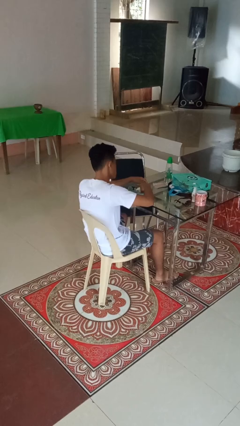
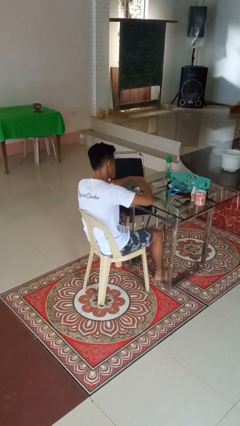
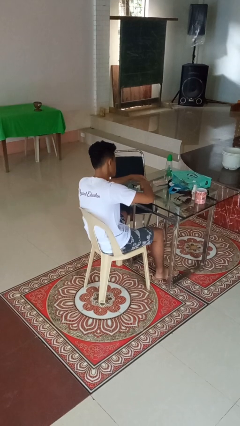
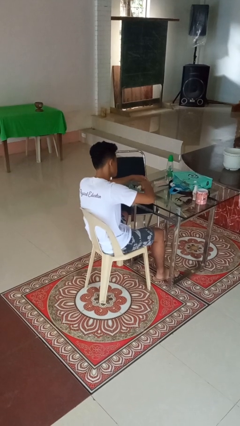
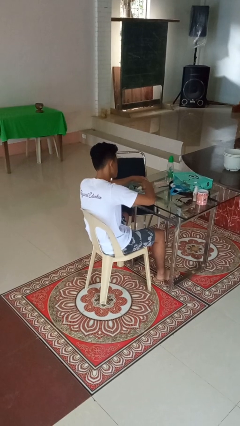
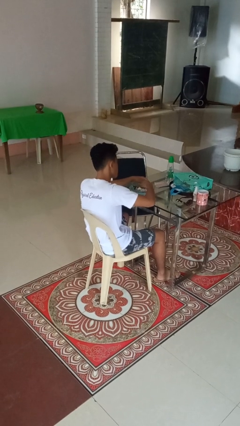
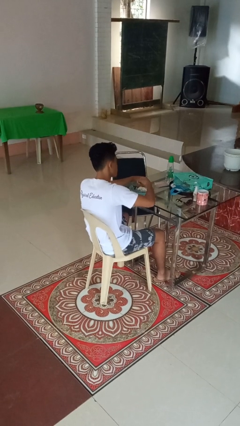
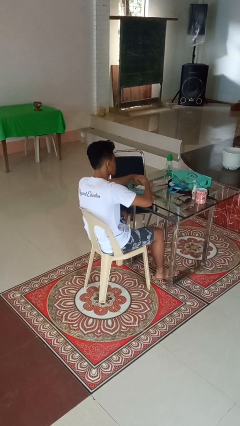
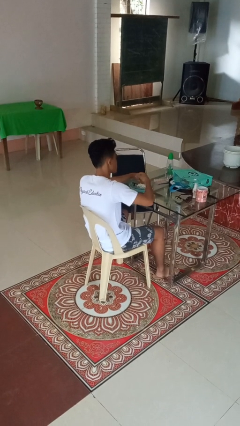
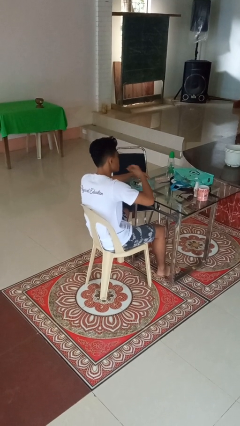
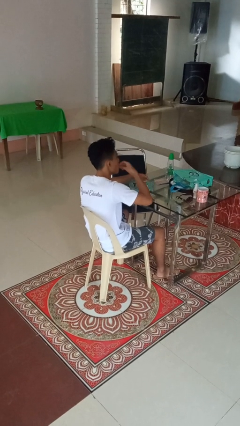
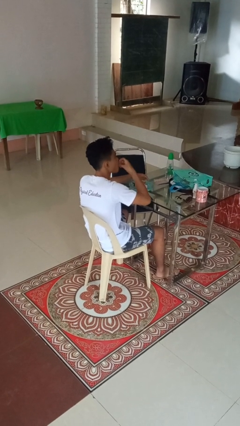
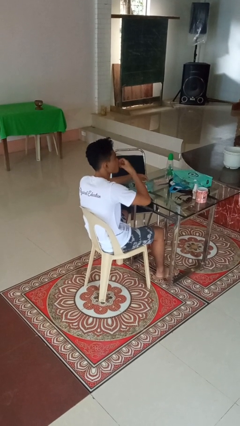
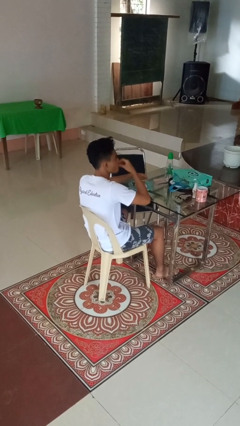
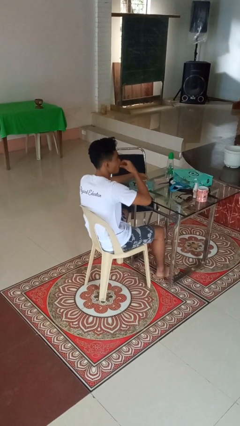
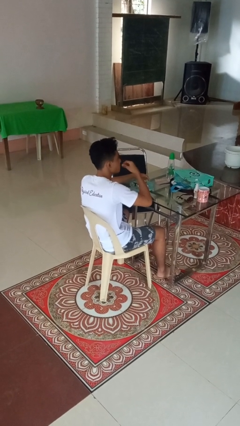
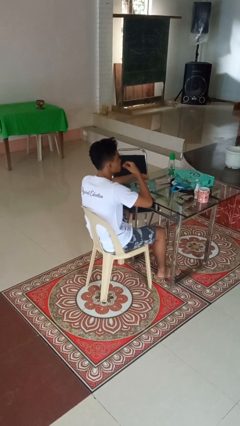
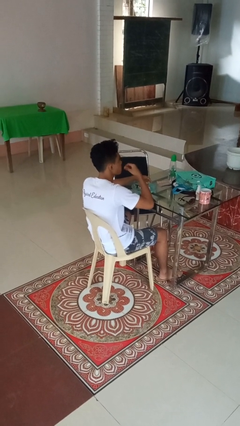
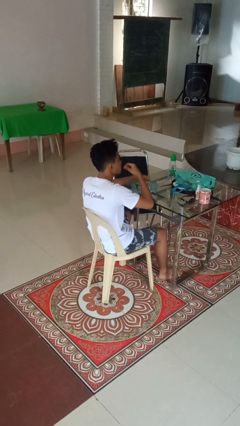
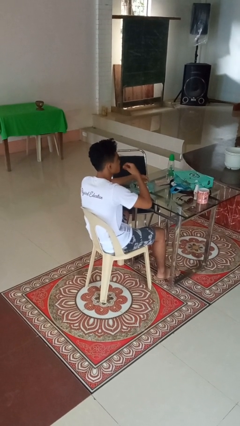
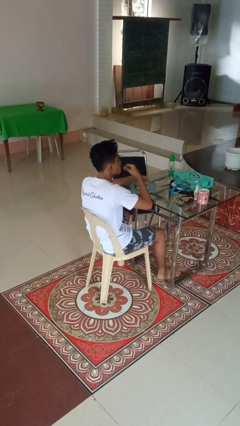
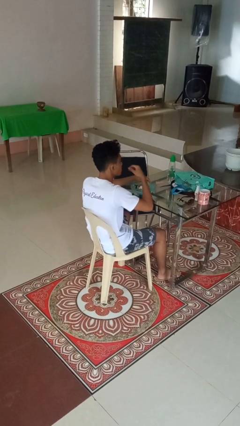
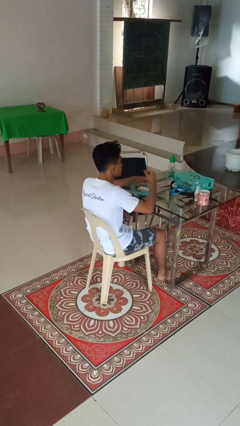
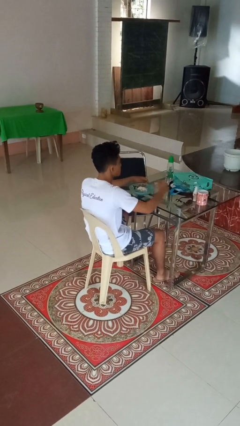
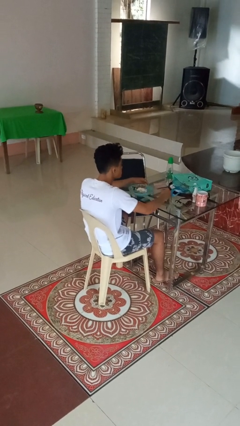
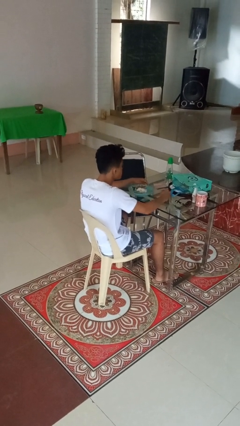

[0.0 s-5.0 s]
person eats with hands

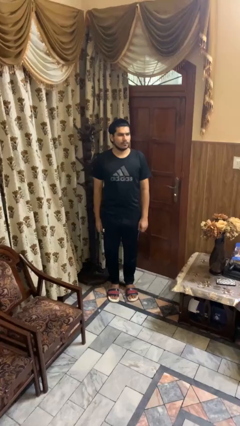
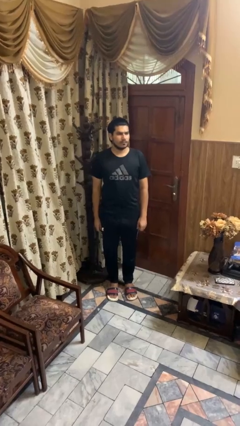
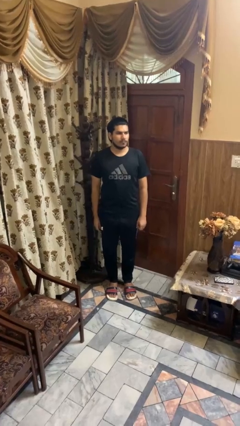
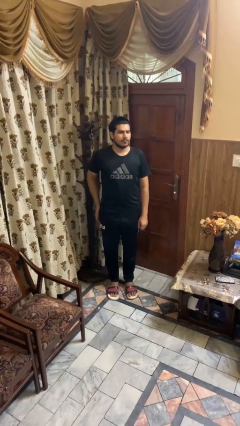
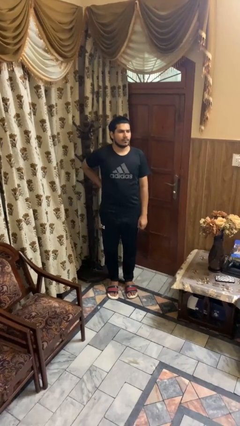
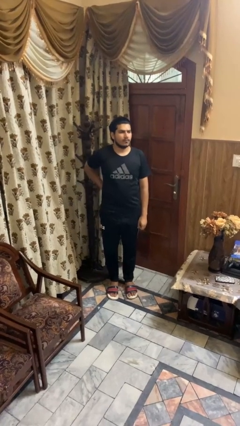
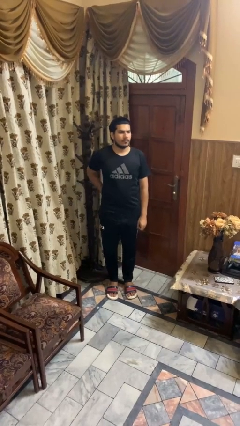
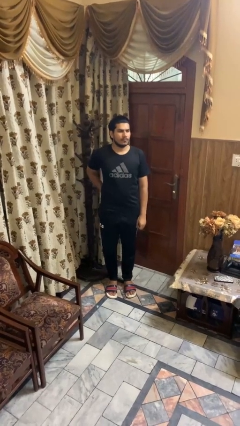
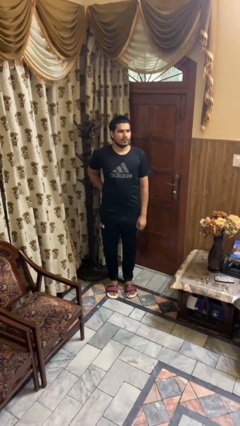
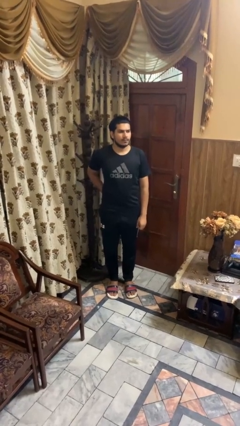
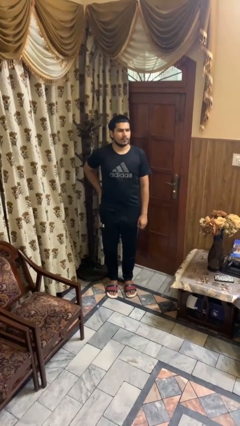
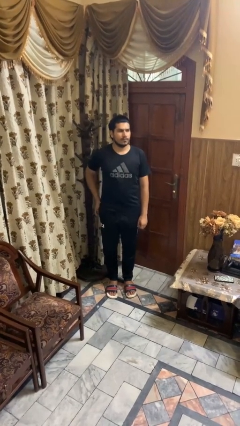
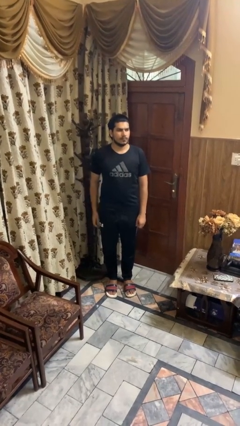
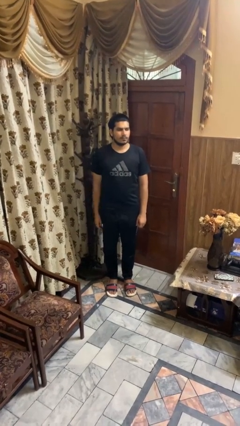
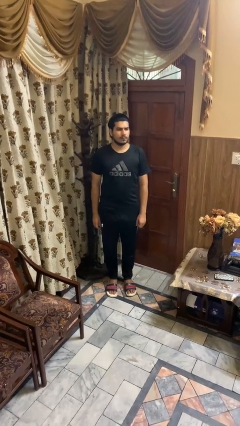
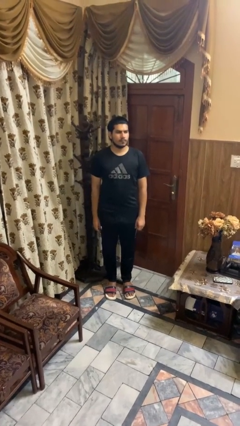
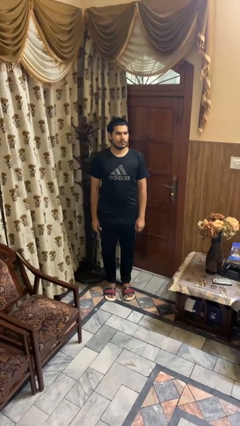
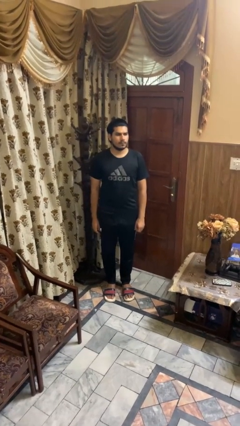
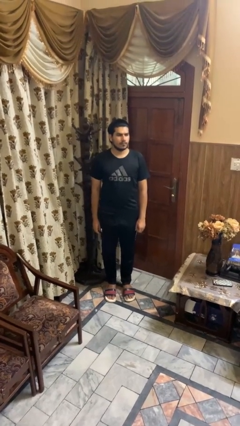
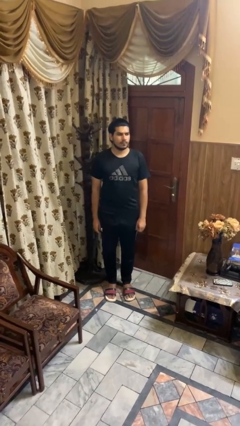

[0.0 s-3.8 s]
person puts hands in back pockets

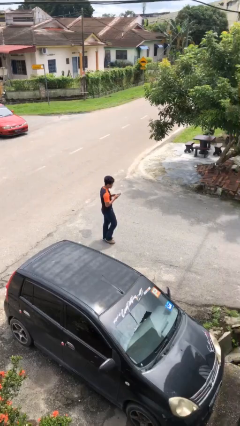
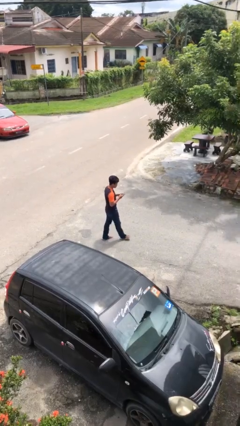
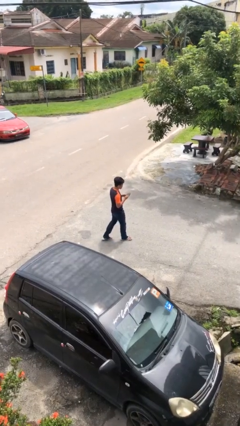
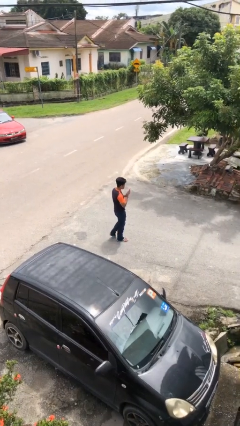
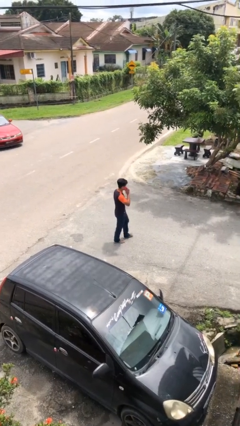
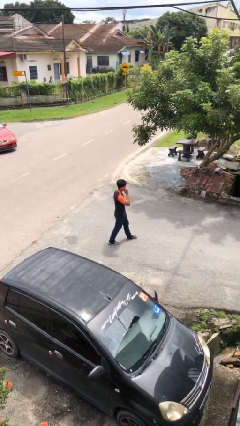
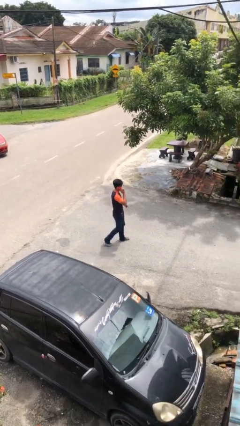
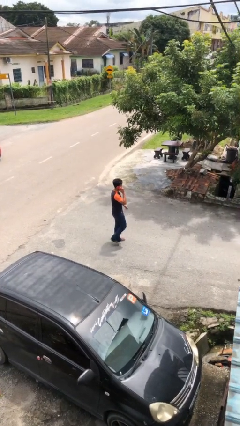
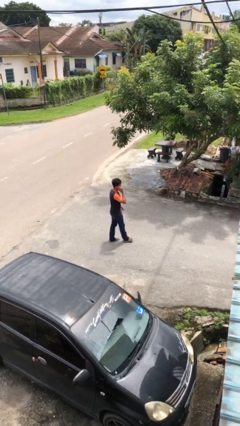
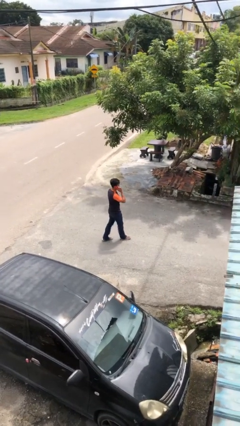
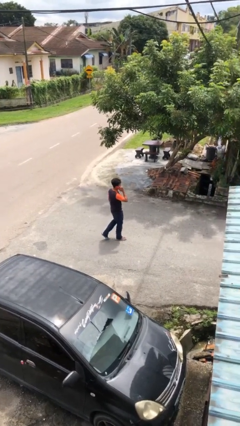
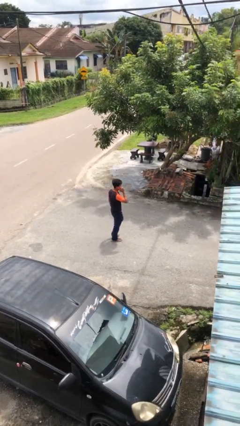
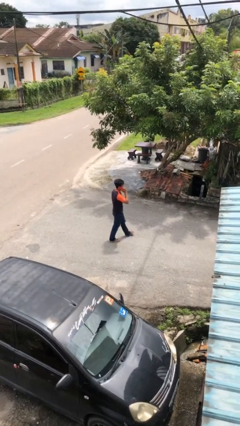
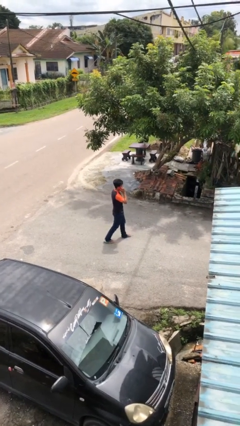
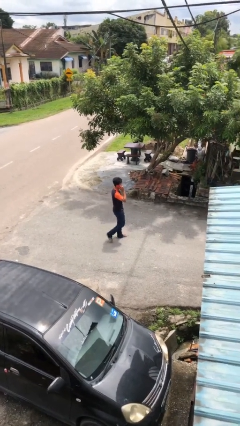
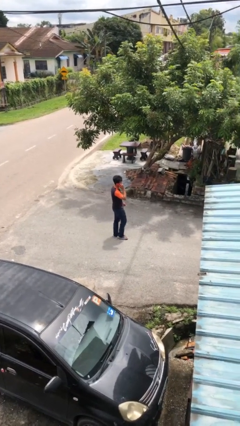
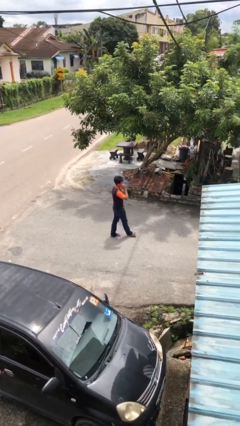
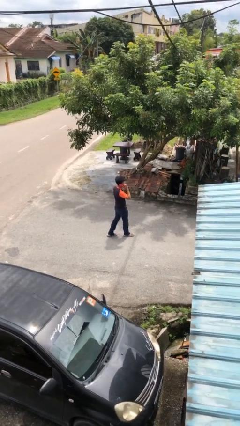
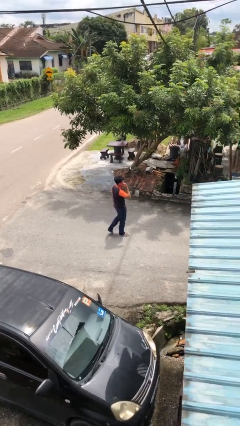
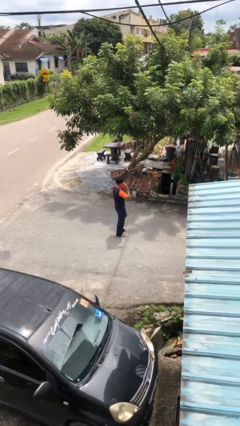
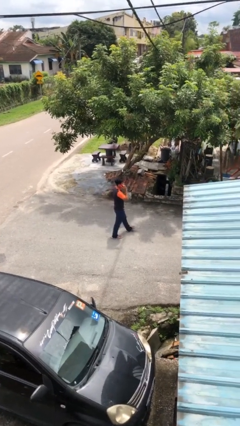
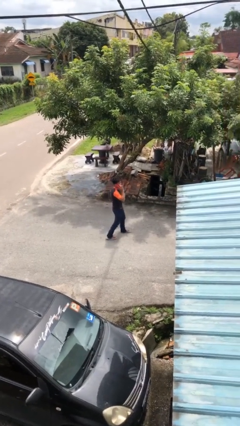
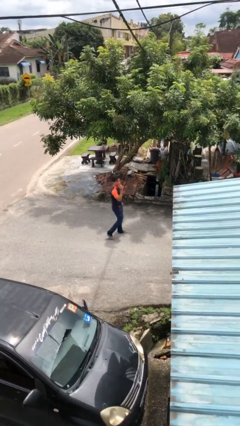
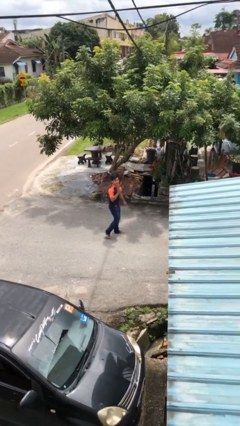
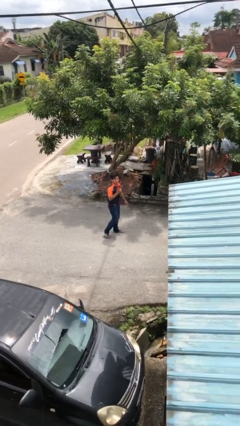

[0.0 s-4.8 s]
person talks on phone

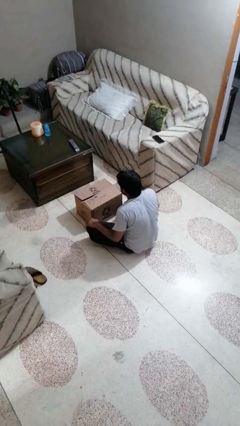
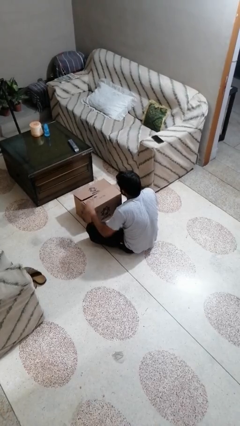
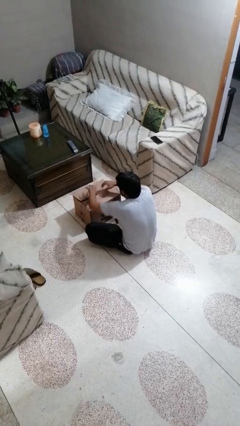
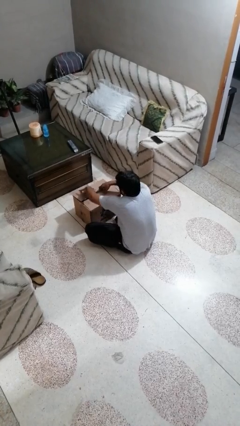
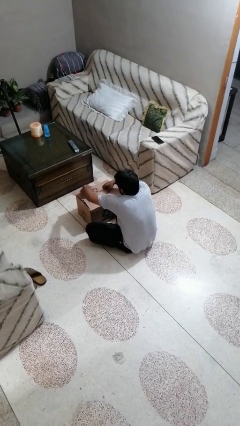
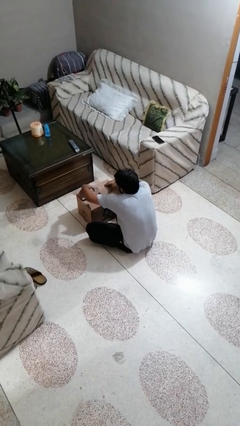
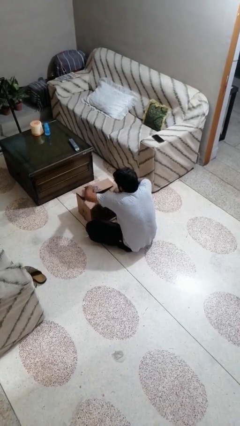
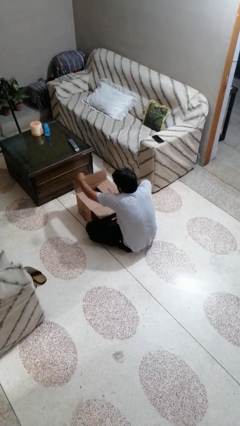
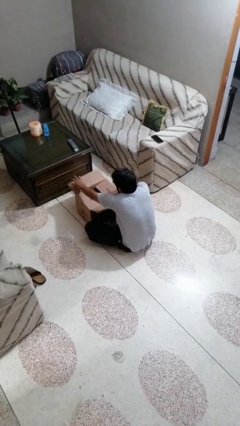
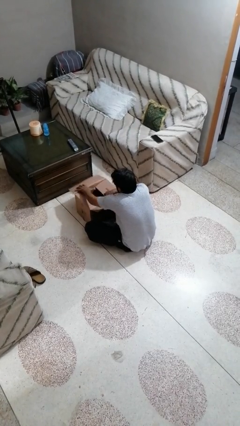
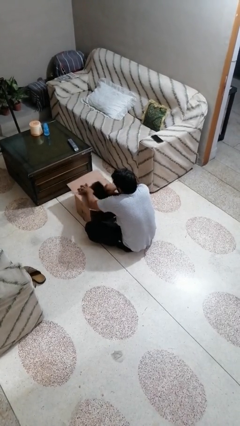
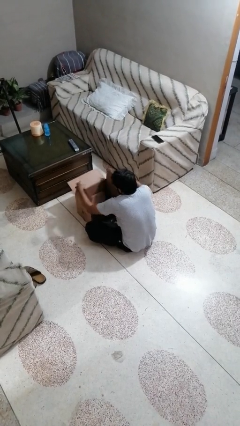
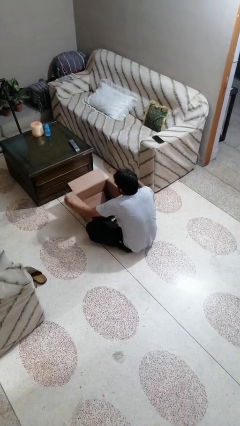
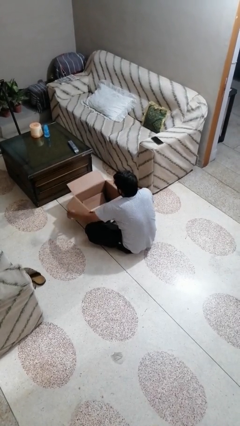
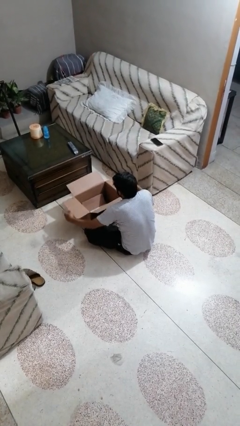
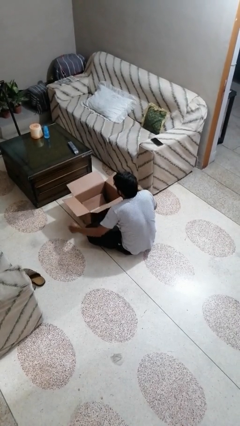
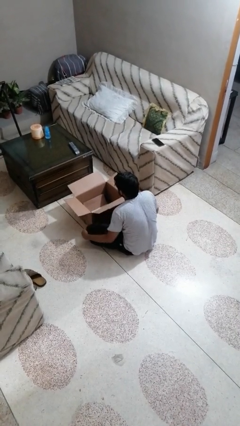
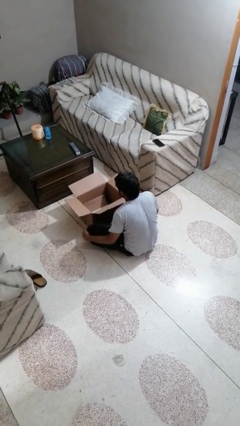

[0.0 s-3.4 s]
person opens box

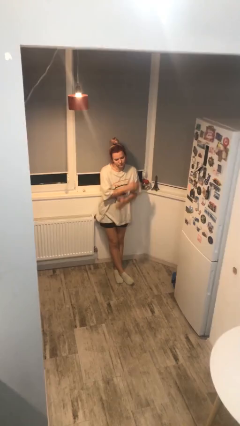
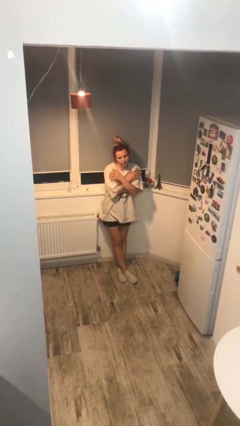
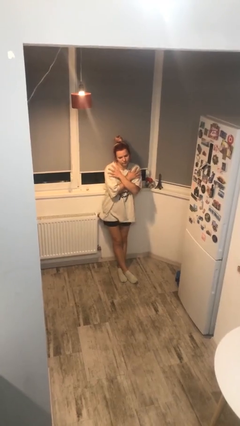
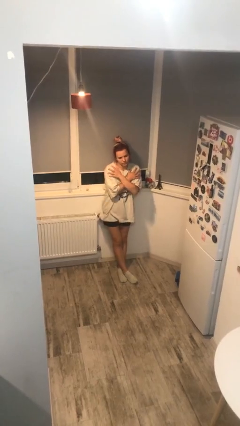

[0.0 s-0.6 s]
person crosses arms
